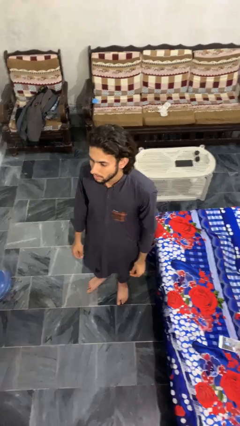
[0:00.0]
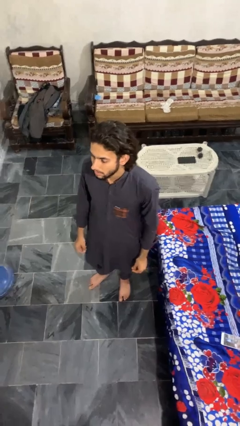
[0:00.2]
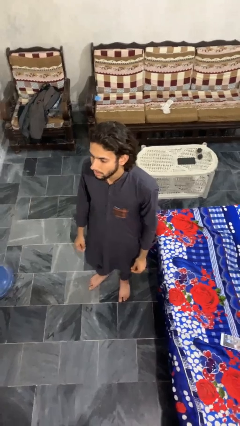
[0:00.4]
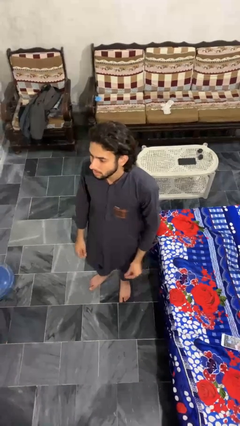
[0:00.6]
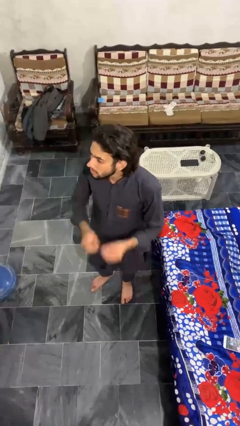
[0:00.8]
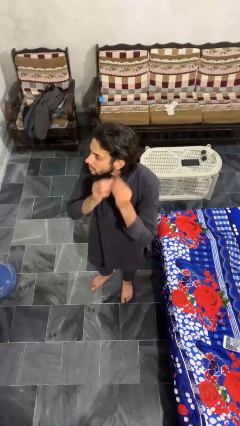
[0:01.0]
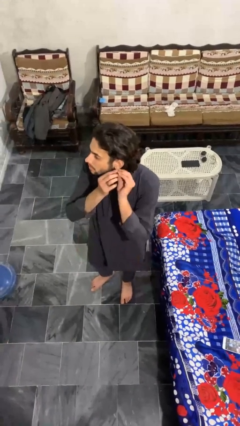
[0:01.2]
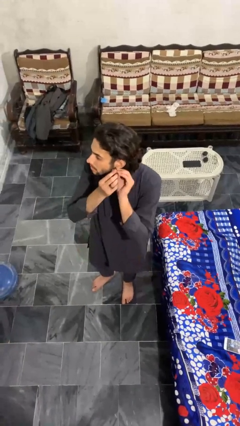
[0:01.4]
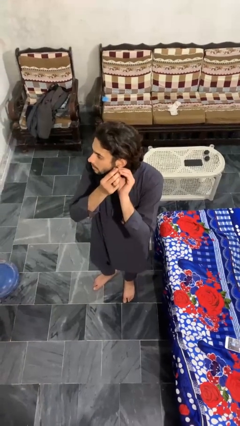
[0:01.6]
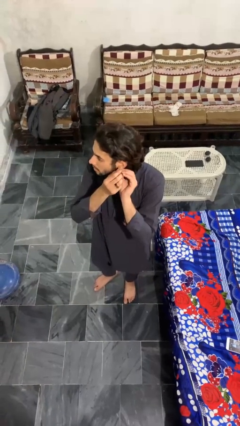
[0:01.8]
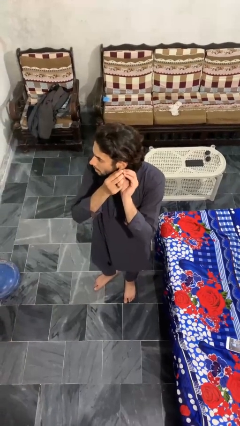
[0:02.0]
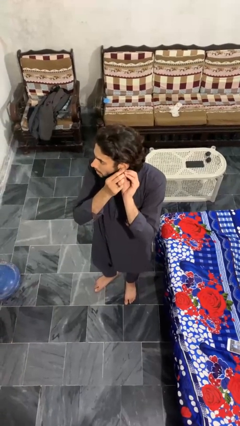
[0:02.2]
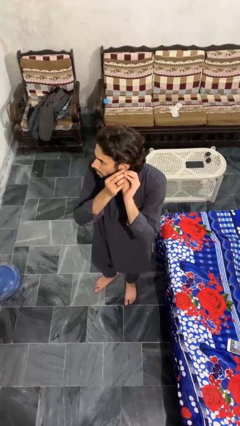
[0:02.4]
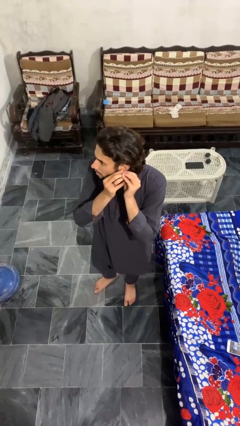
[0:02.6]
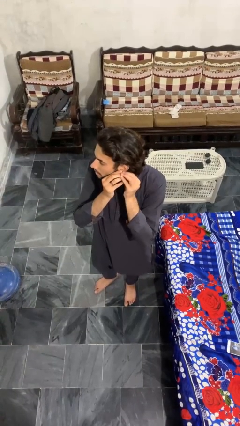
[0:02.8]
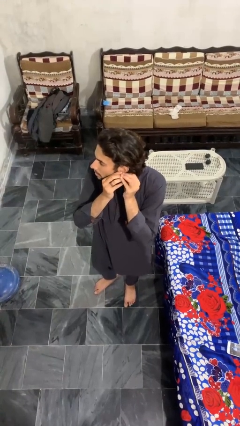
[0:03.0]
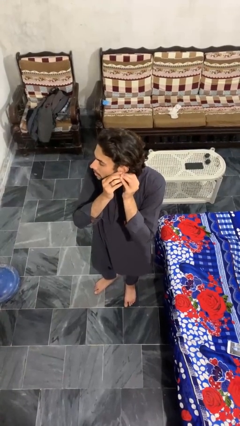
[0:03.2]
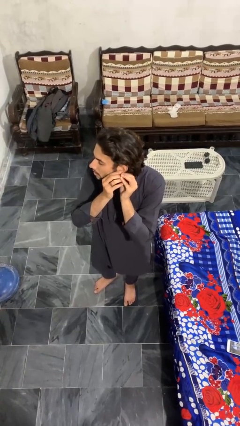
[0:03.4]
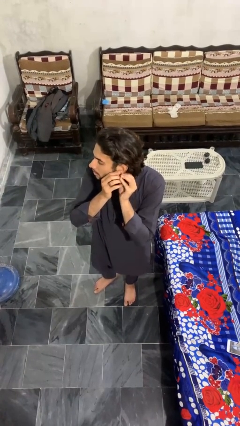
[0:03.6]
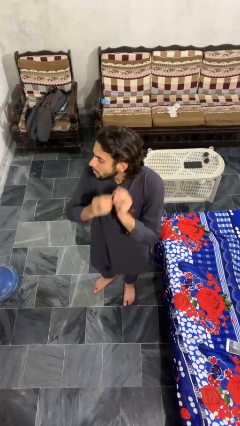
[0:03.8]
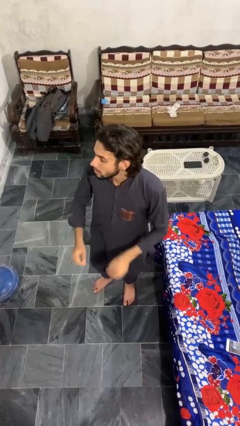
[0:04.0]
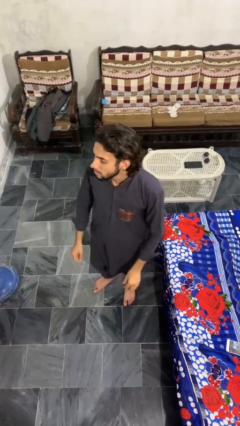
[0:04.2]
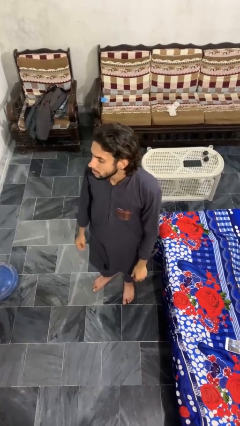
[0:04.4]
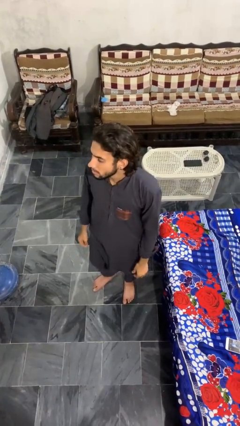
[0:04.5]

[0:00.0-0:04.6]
person puts on earrings

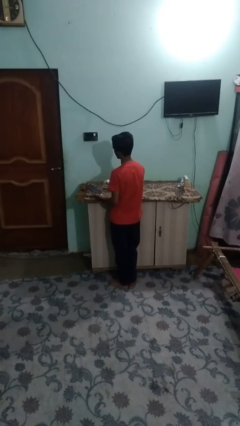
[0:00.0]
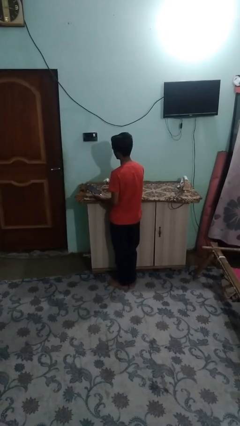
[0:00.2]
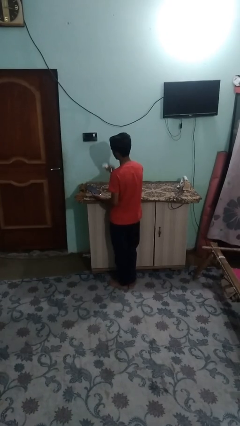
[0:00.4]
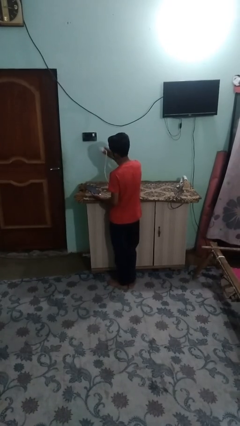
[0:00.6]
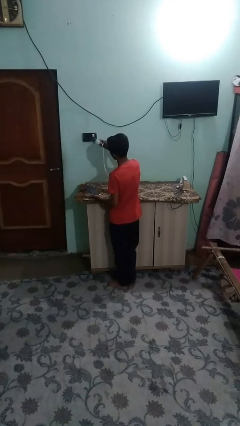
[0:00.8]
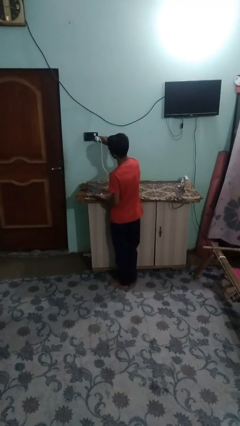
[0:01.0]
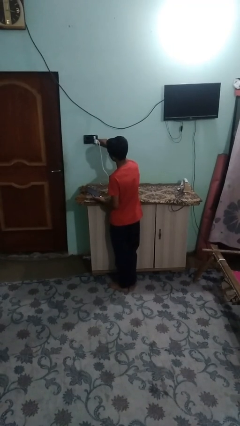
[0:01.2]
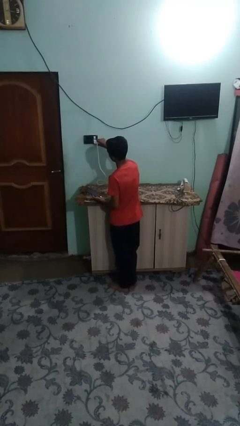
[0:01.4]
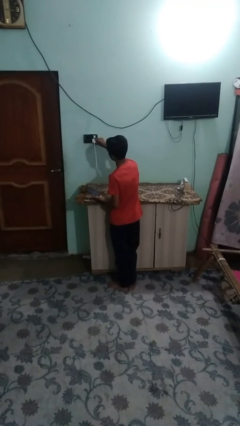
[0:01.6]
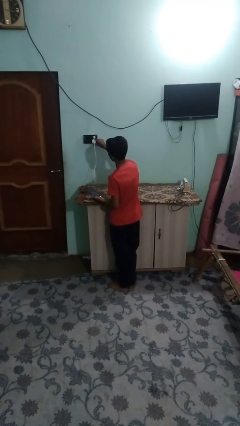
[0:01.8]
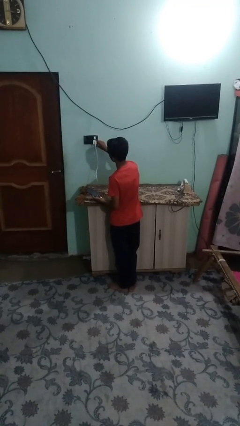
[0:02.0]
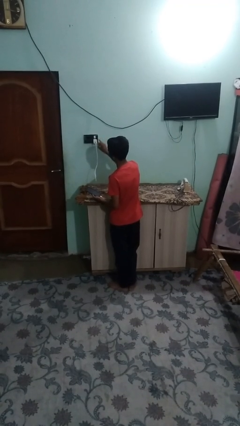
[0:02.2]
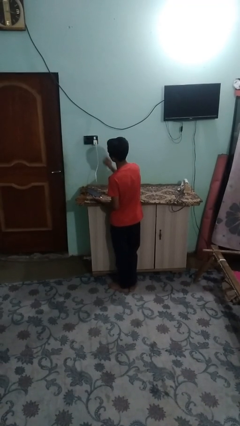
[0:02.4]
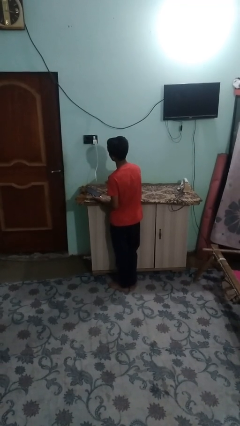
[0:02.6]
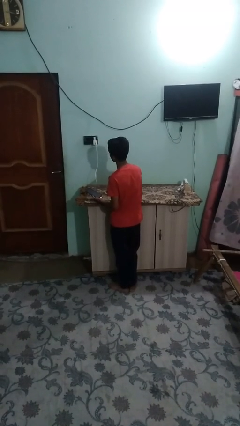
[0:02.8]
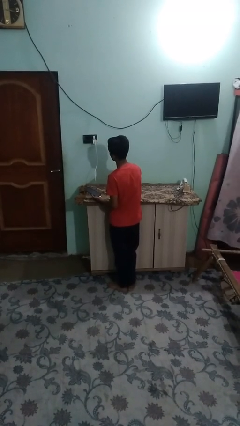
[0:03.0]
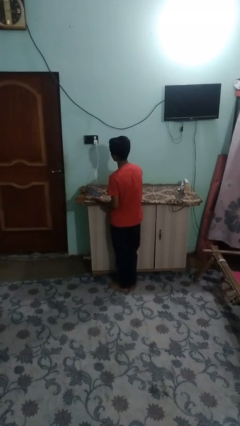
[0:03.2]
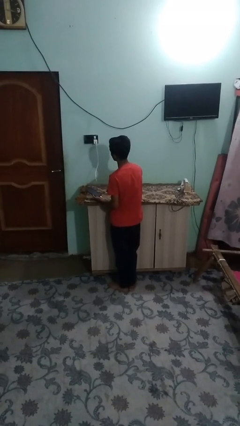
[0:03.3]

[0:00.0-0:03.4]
person plugs into electrical socket

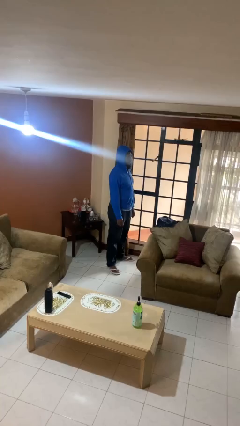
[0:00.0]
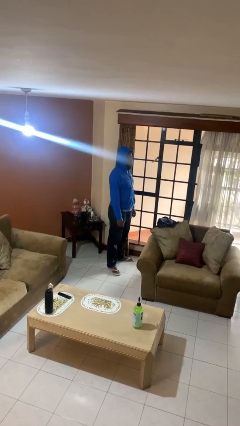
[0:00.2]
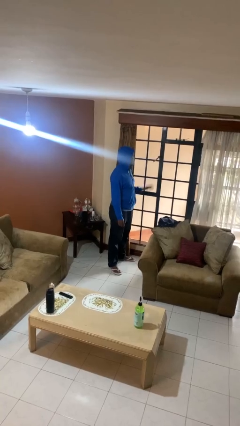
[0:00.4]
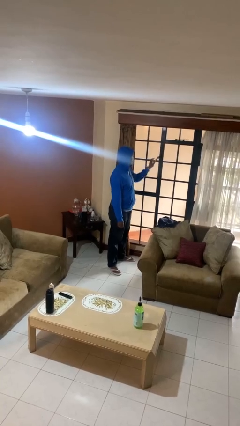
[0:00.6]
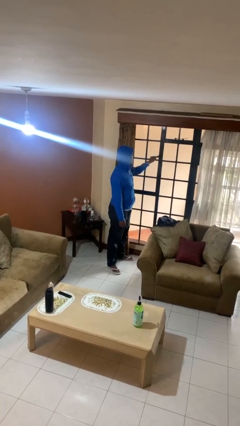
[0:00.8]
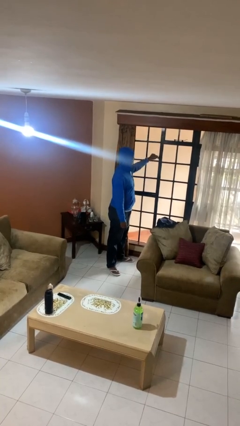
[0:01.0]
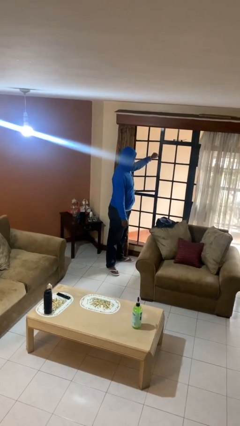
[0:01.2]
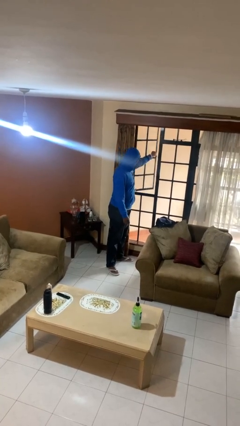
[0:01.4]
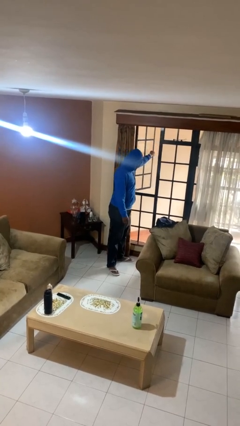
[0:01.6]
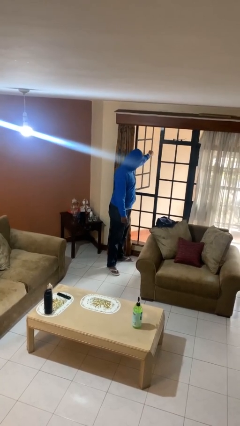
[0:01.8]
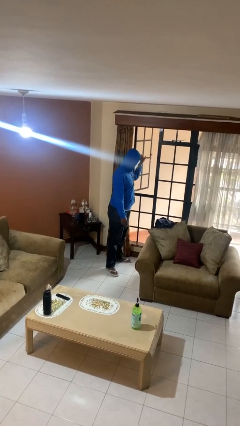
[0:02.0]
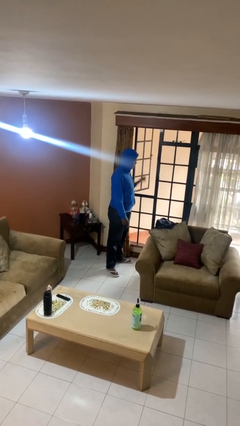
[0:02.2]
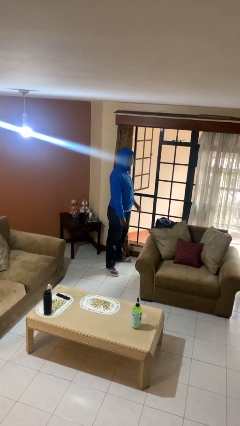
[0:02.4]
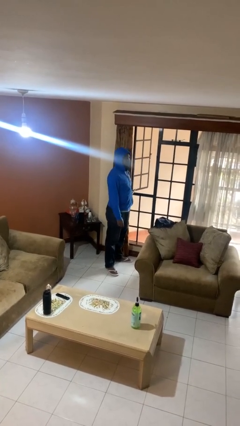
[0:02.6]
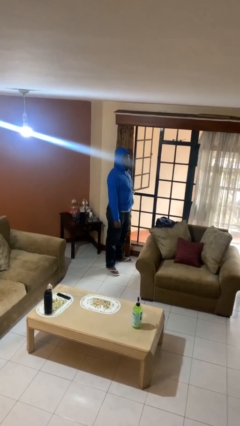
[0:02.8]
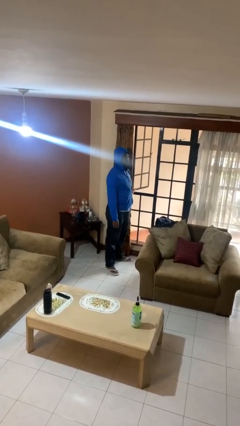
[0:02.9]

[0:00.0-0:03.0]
person opens home window

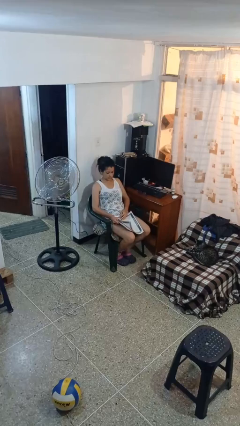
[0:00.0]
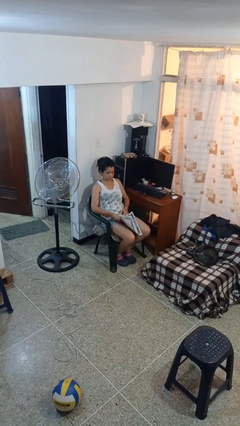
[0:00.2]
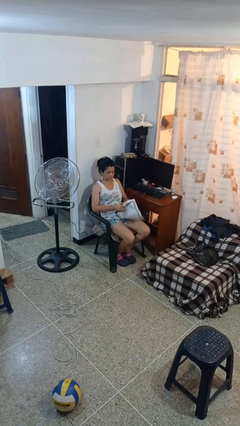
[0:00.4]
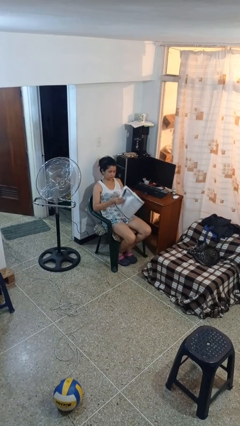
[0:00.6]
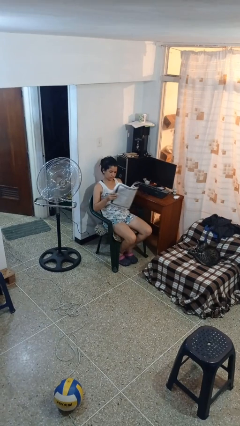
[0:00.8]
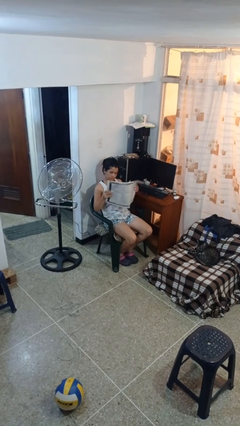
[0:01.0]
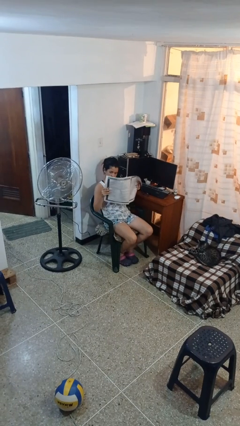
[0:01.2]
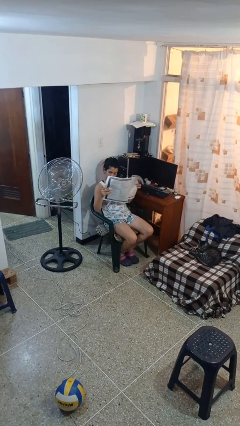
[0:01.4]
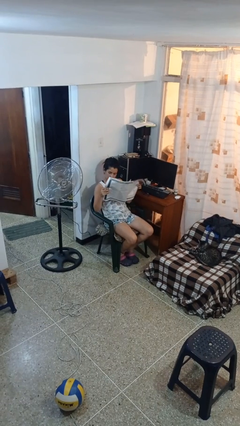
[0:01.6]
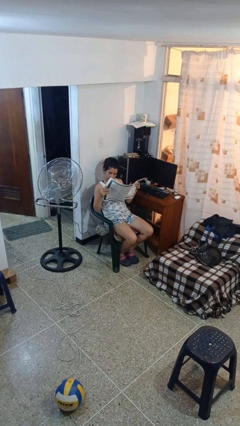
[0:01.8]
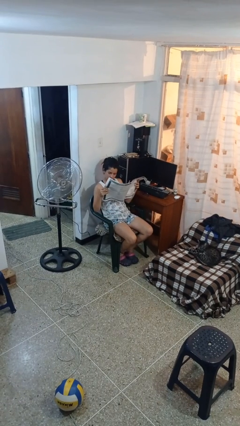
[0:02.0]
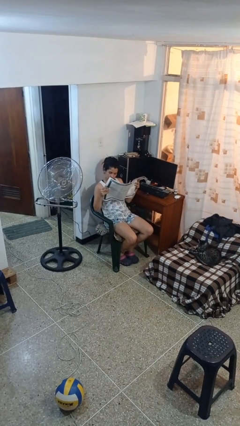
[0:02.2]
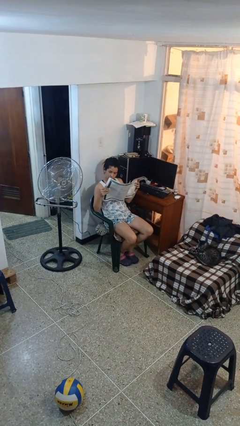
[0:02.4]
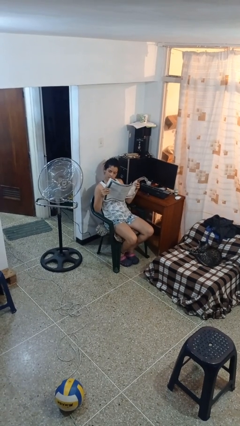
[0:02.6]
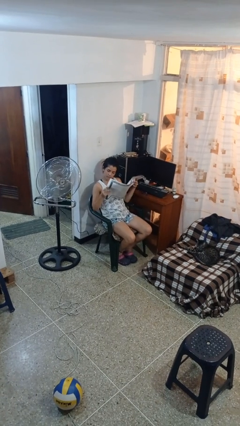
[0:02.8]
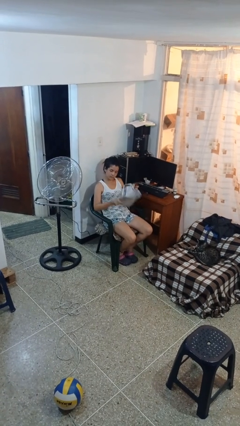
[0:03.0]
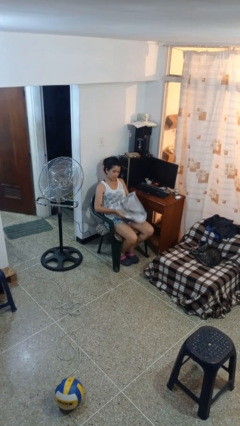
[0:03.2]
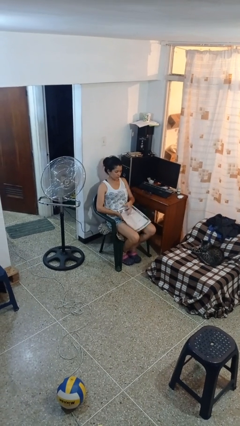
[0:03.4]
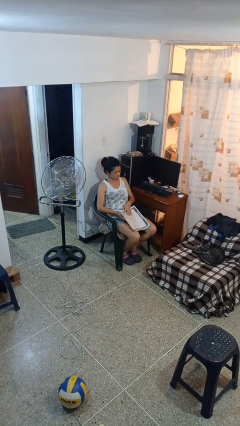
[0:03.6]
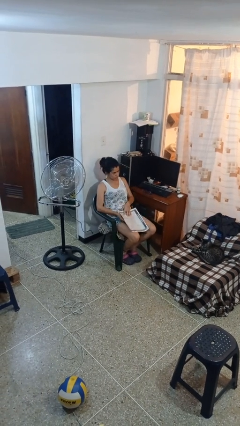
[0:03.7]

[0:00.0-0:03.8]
person reads newspaper

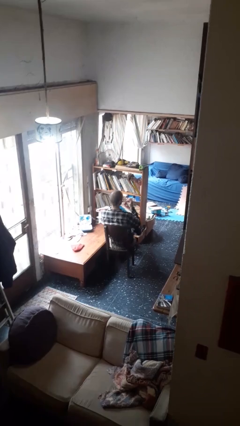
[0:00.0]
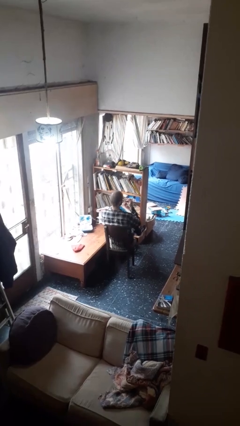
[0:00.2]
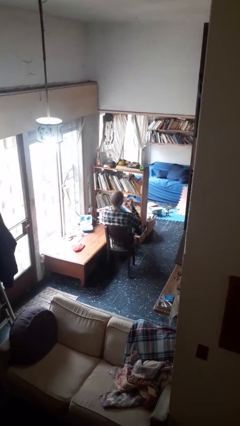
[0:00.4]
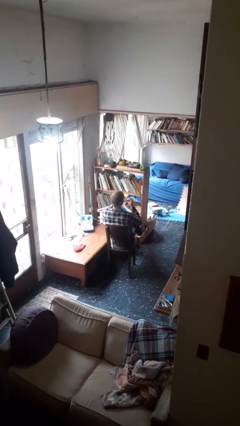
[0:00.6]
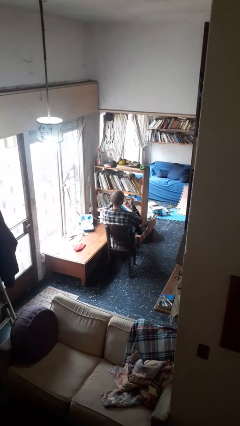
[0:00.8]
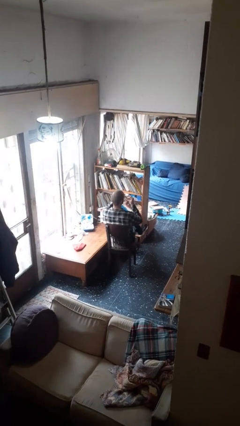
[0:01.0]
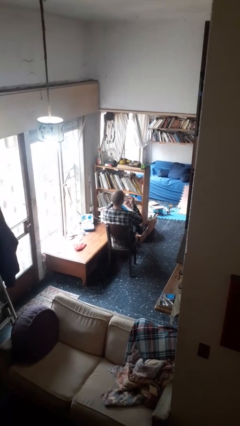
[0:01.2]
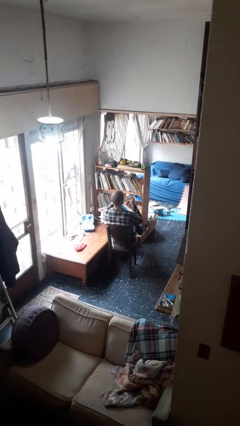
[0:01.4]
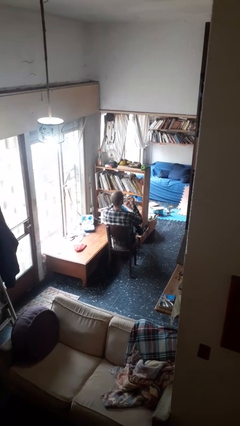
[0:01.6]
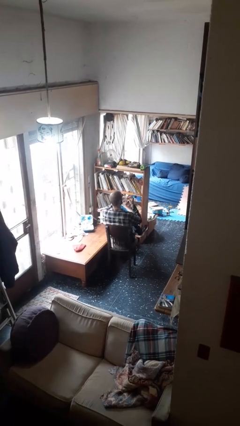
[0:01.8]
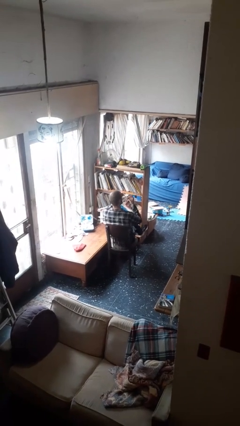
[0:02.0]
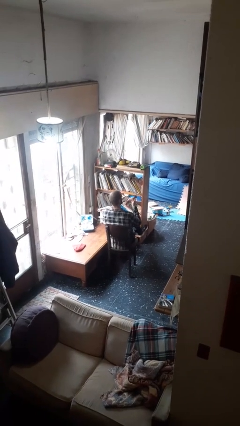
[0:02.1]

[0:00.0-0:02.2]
person clips fingernails

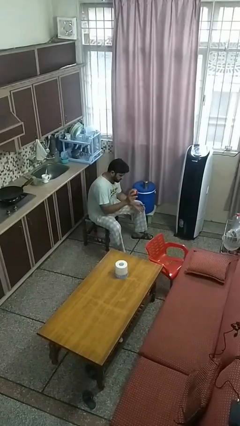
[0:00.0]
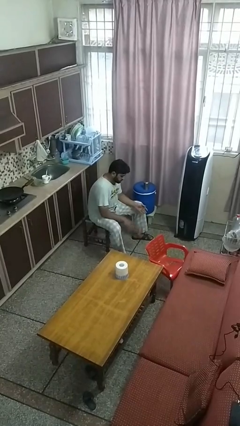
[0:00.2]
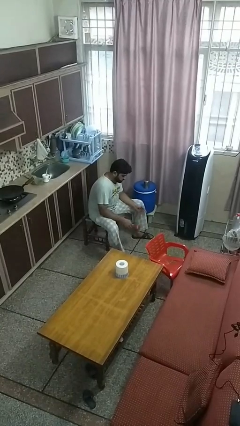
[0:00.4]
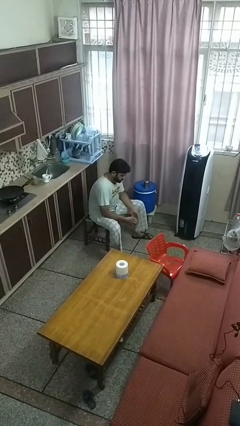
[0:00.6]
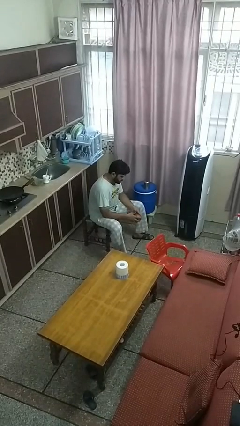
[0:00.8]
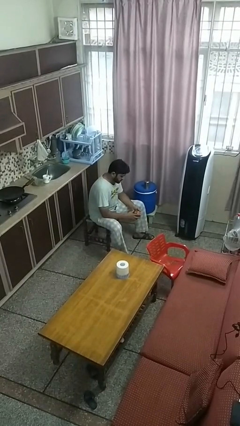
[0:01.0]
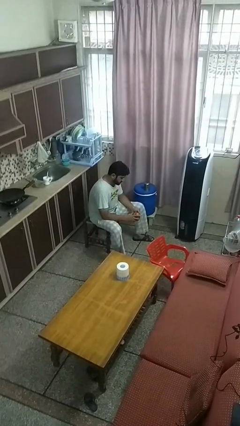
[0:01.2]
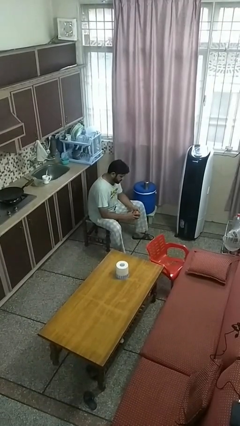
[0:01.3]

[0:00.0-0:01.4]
person bounces ball on floor
